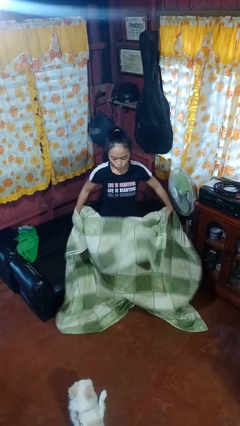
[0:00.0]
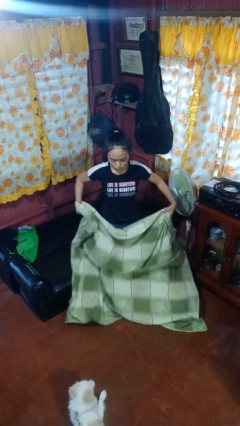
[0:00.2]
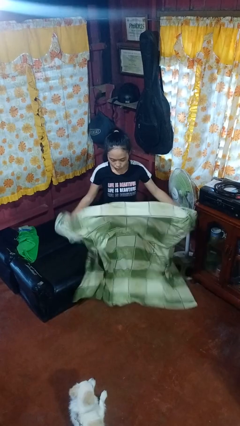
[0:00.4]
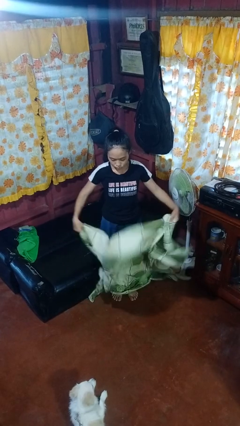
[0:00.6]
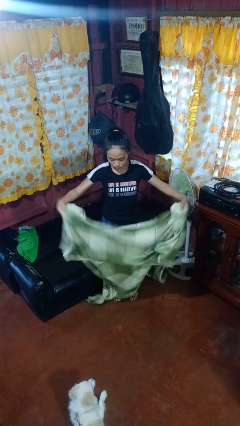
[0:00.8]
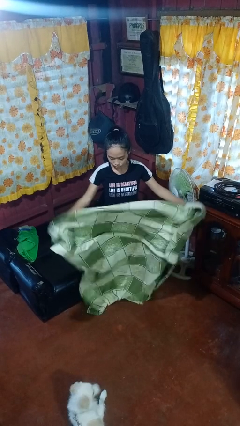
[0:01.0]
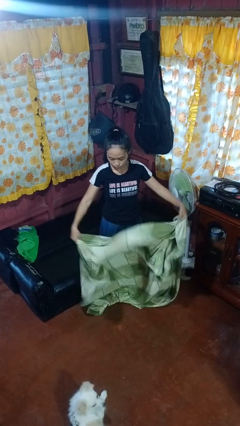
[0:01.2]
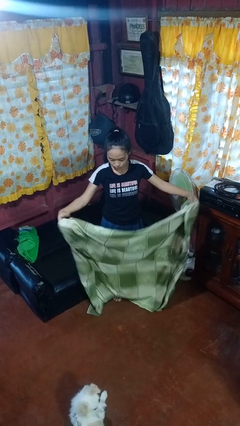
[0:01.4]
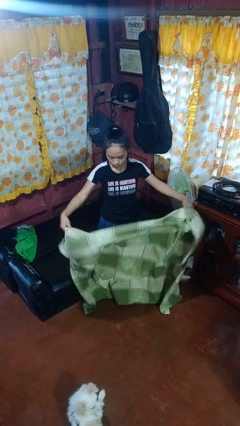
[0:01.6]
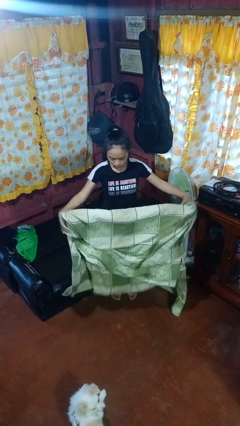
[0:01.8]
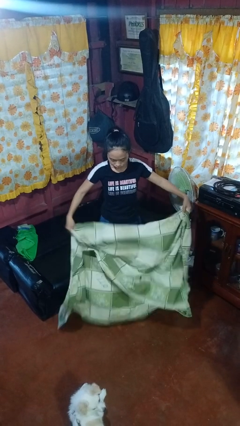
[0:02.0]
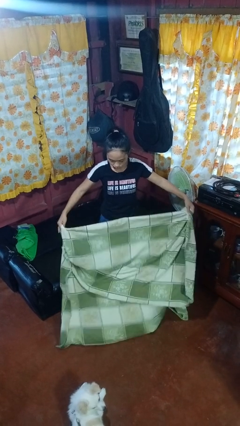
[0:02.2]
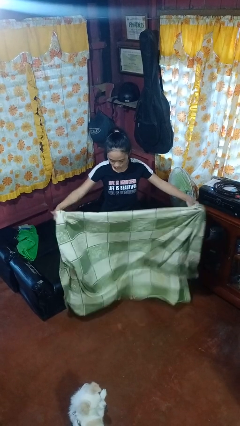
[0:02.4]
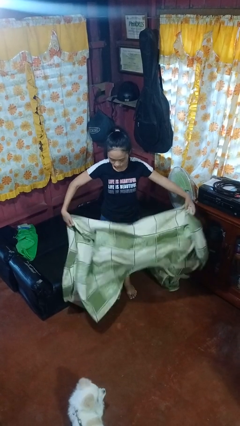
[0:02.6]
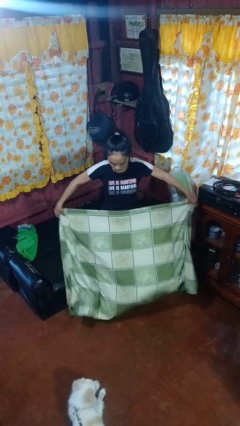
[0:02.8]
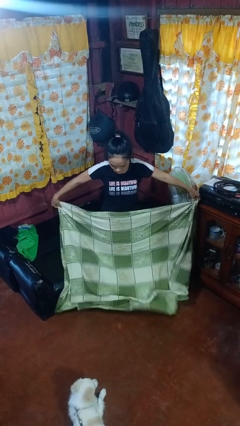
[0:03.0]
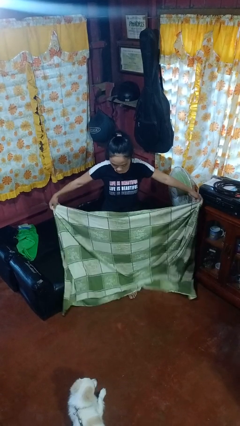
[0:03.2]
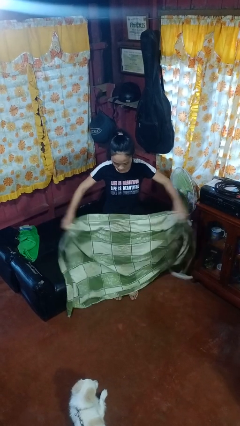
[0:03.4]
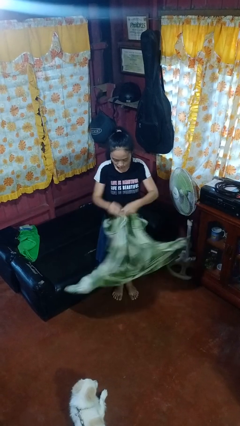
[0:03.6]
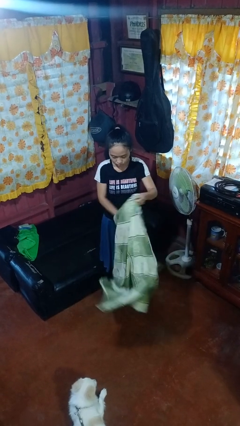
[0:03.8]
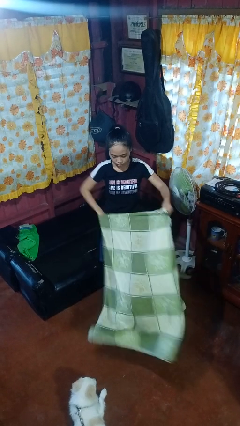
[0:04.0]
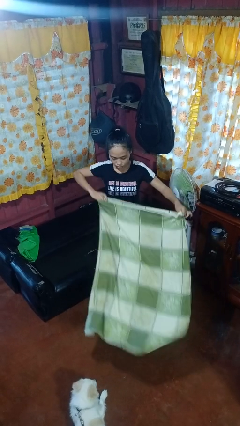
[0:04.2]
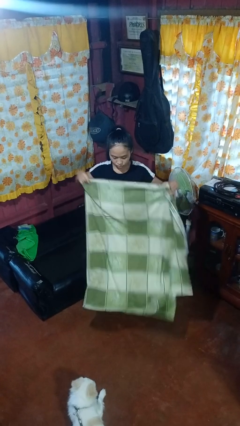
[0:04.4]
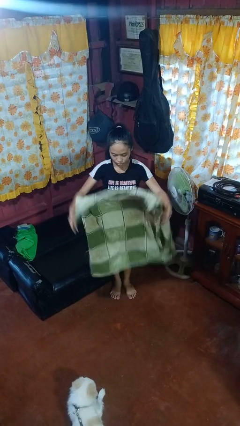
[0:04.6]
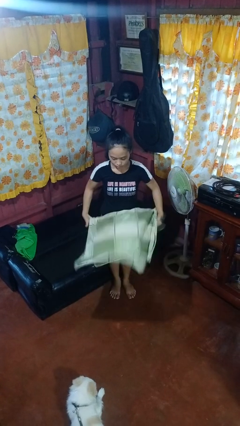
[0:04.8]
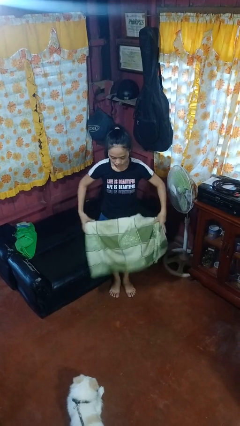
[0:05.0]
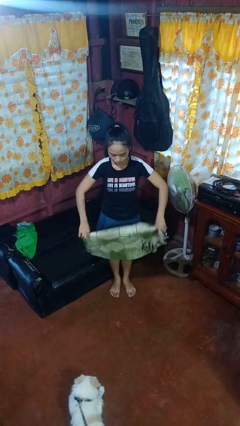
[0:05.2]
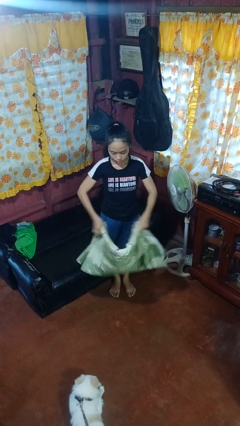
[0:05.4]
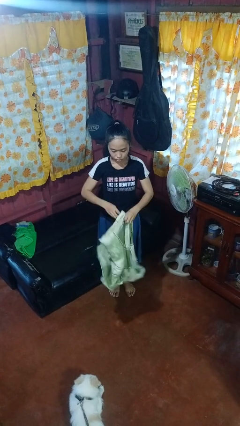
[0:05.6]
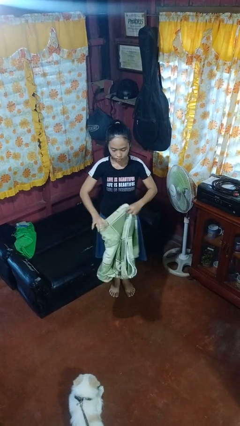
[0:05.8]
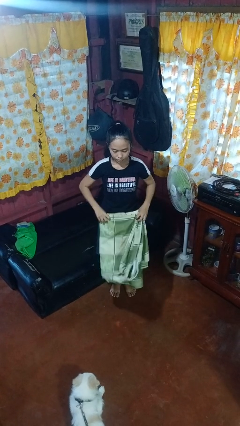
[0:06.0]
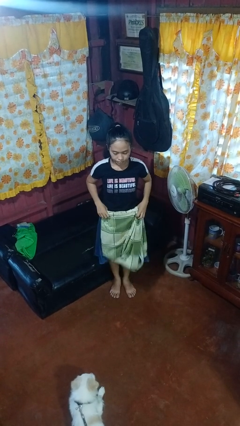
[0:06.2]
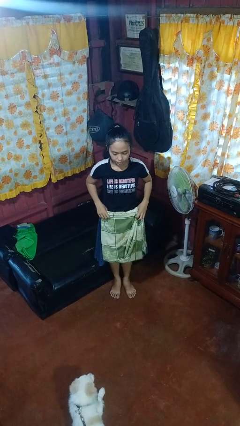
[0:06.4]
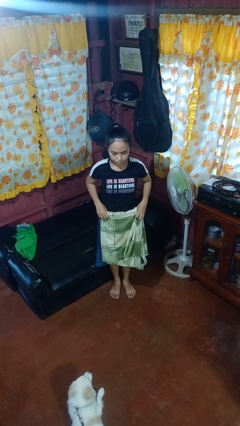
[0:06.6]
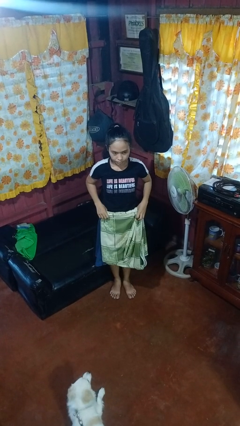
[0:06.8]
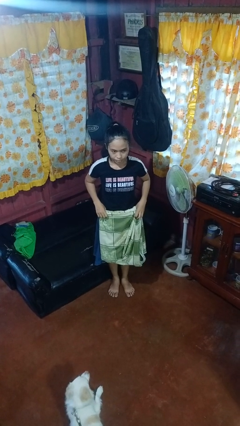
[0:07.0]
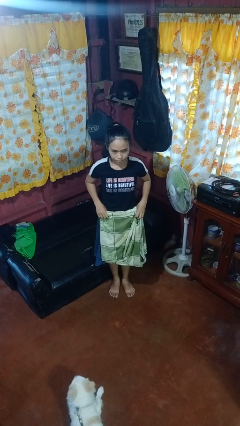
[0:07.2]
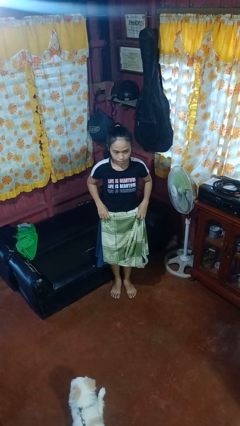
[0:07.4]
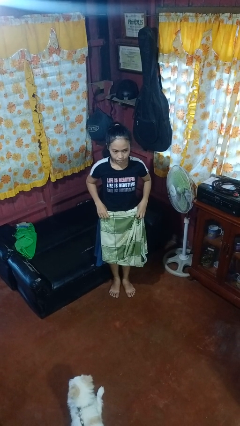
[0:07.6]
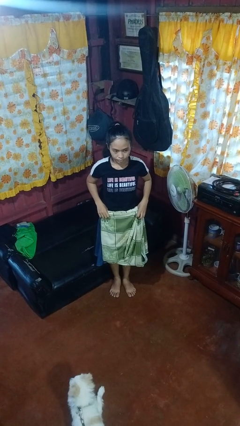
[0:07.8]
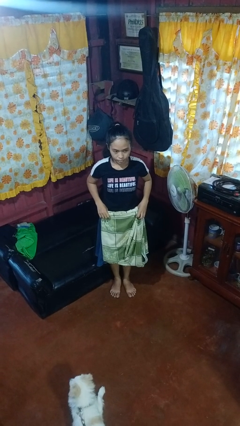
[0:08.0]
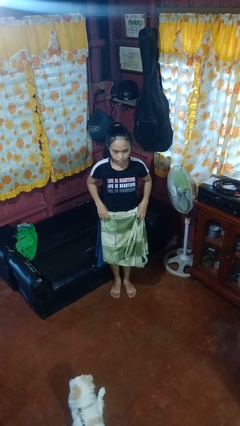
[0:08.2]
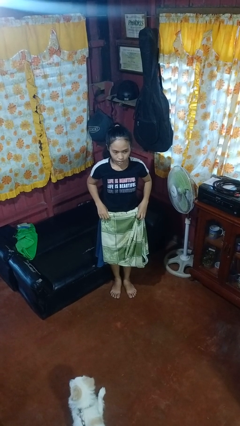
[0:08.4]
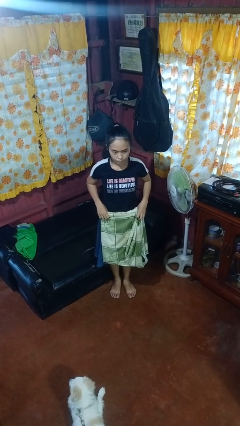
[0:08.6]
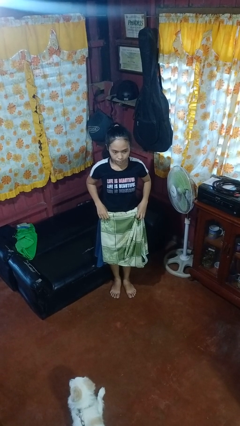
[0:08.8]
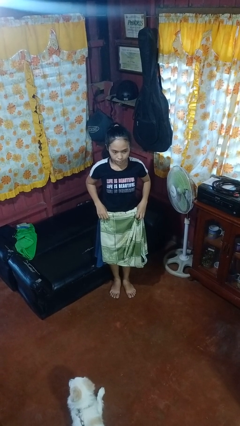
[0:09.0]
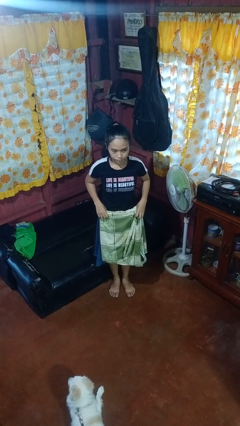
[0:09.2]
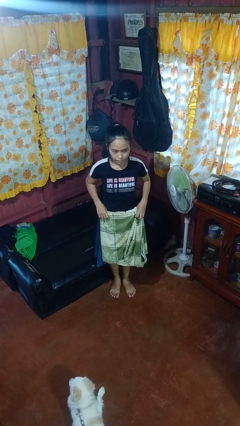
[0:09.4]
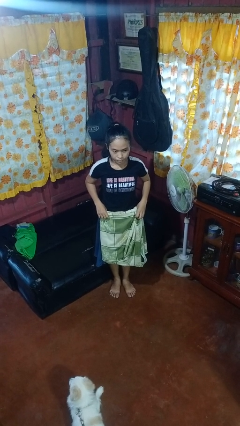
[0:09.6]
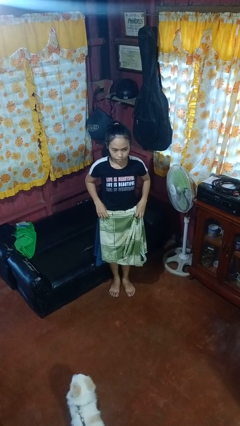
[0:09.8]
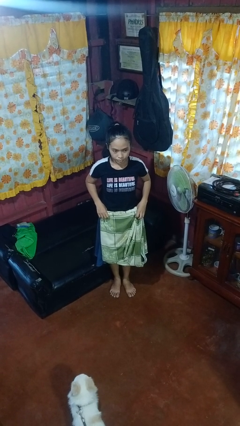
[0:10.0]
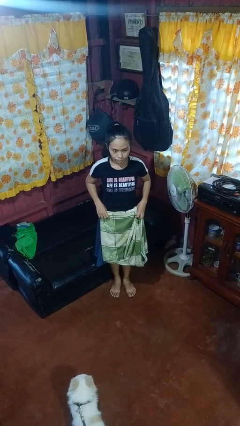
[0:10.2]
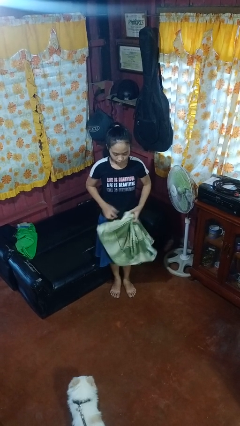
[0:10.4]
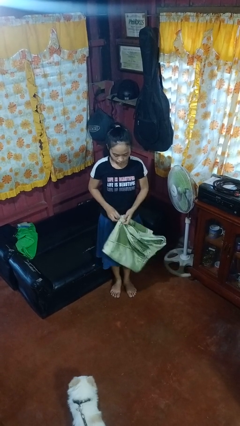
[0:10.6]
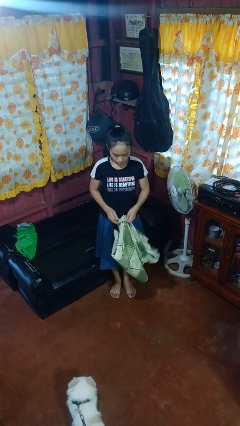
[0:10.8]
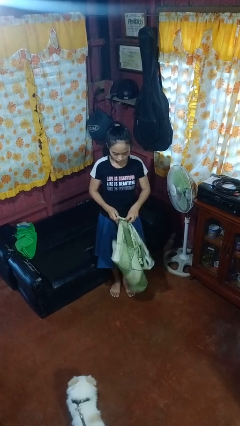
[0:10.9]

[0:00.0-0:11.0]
person folds blanket

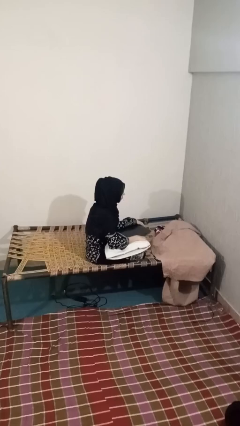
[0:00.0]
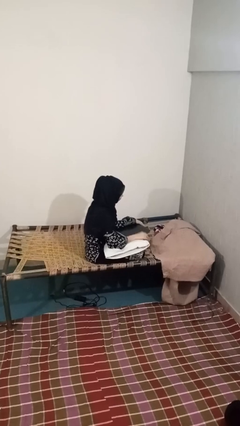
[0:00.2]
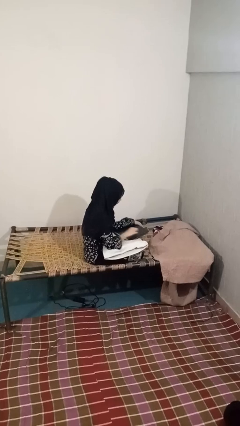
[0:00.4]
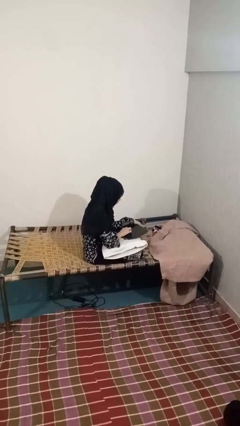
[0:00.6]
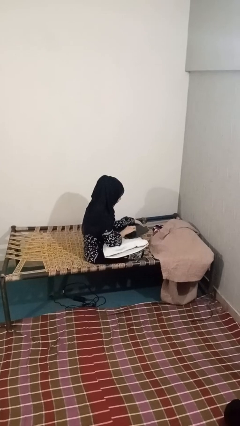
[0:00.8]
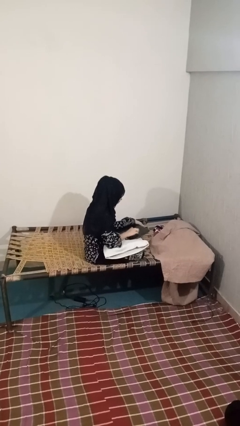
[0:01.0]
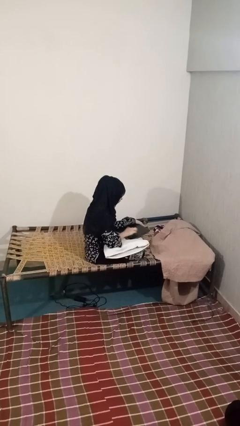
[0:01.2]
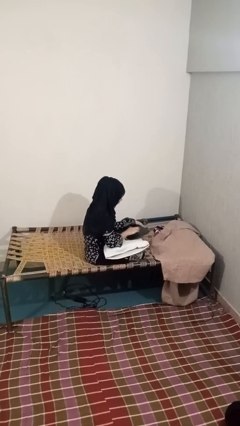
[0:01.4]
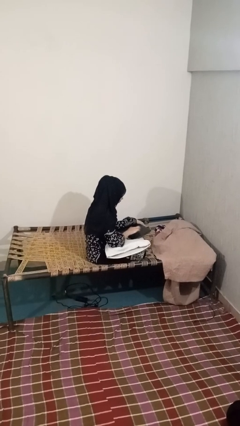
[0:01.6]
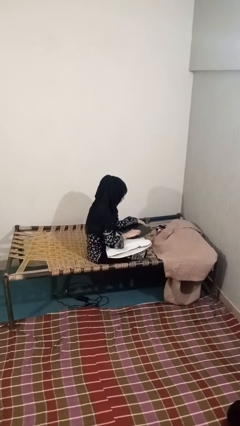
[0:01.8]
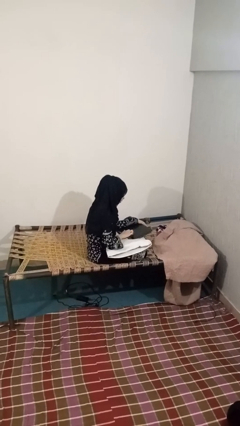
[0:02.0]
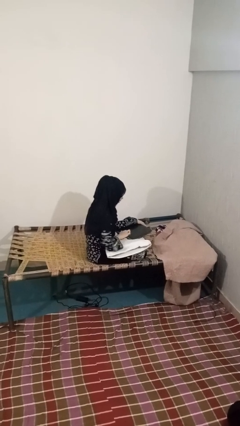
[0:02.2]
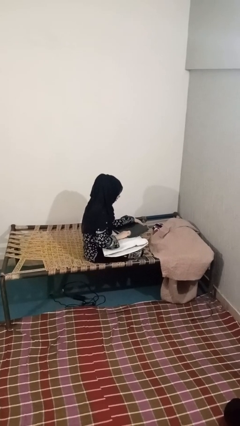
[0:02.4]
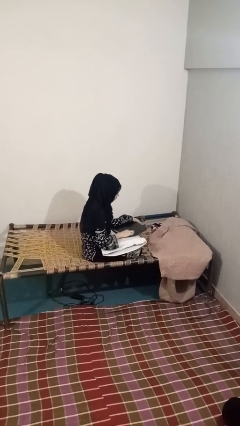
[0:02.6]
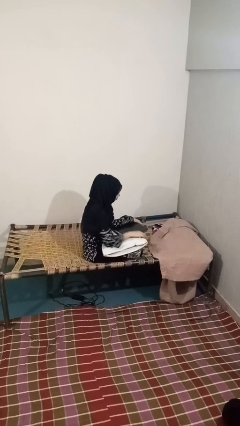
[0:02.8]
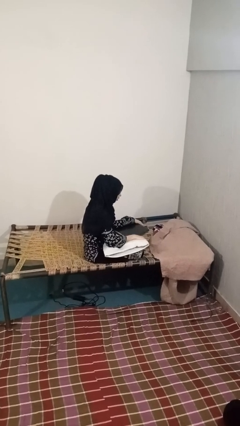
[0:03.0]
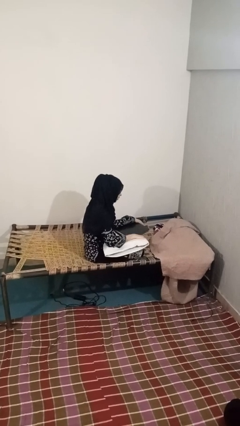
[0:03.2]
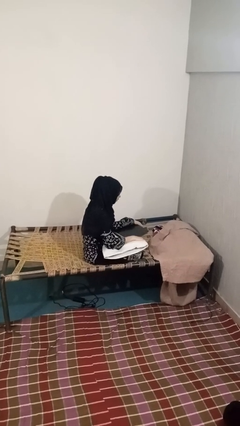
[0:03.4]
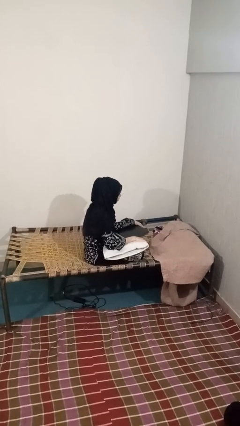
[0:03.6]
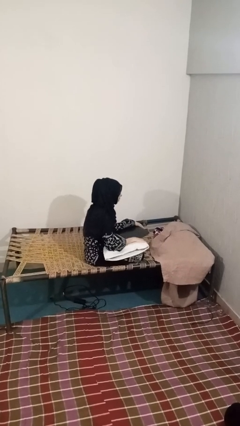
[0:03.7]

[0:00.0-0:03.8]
person interacts with tablet

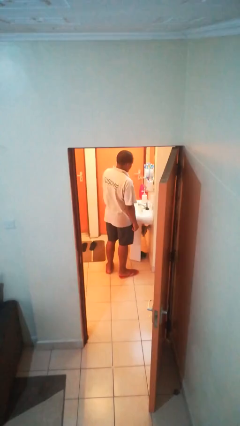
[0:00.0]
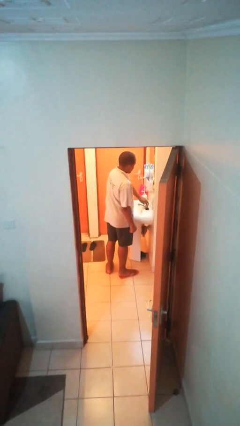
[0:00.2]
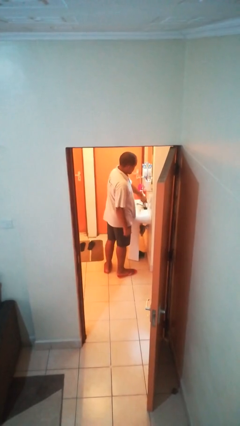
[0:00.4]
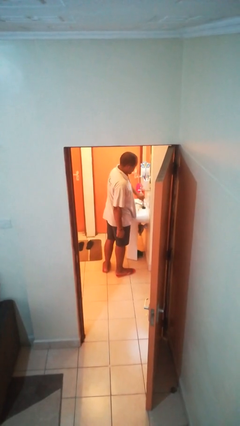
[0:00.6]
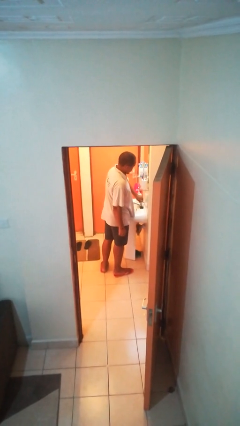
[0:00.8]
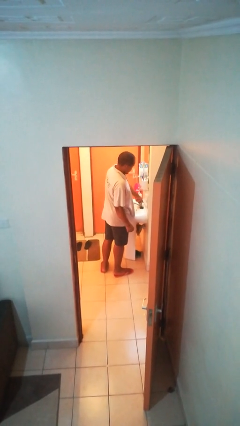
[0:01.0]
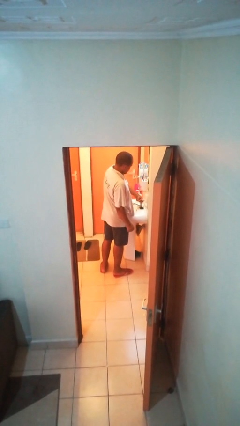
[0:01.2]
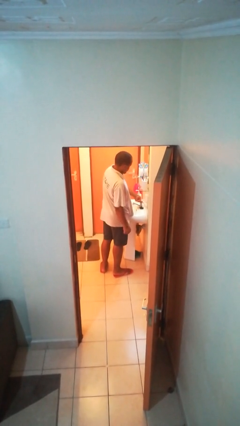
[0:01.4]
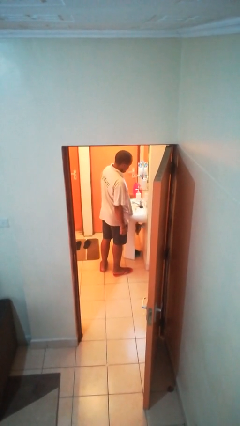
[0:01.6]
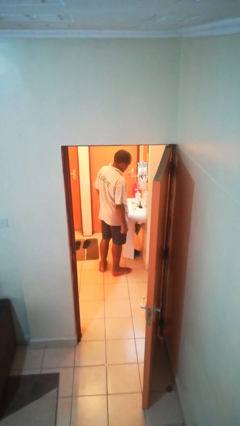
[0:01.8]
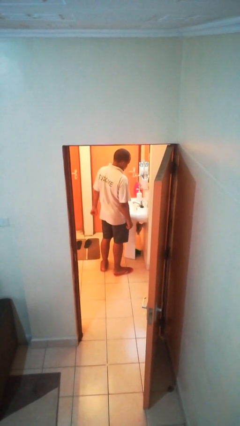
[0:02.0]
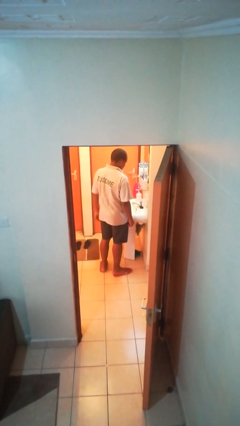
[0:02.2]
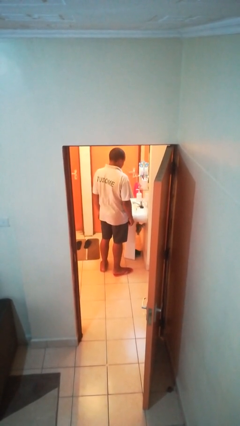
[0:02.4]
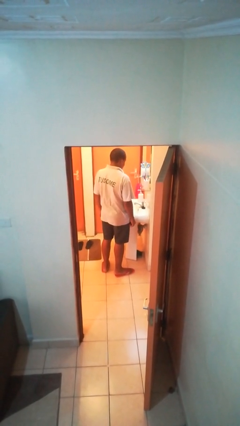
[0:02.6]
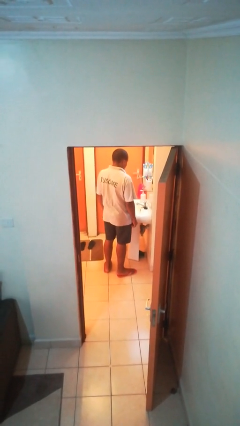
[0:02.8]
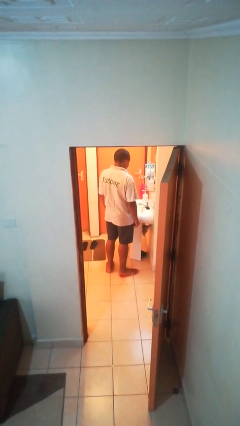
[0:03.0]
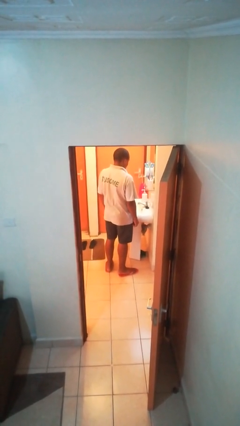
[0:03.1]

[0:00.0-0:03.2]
person turns on faucet
